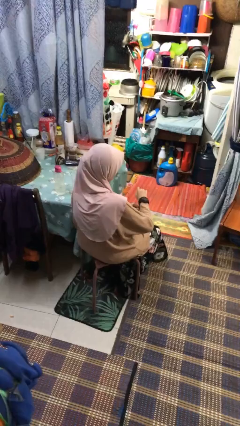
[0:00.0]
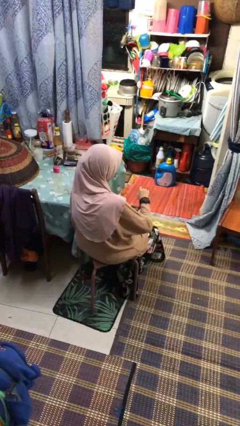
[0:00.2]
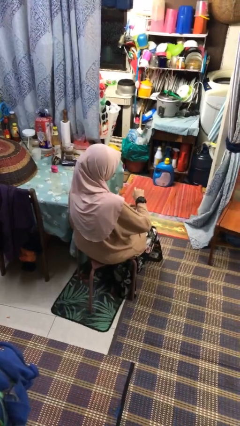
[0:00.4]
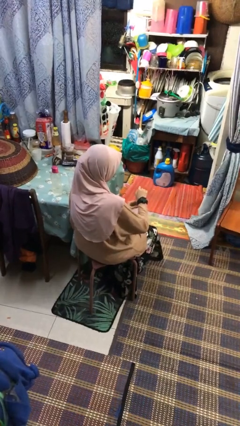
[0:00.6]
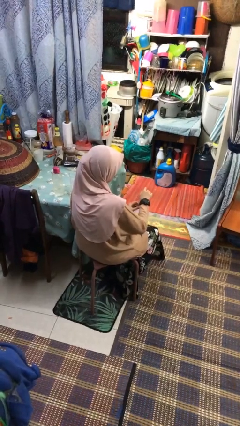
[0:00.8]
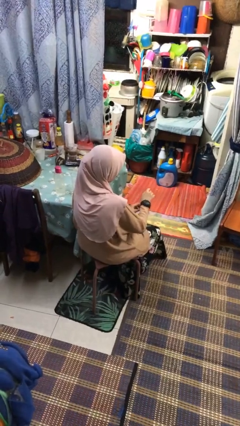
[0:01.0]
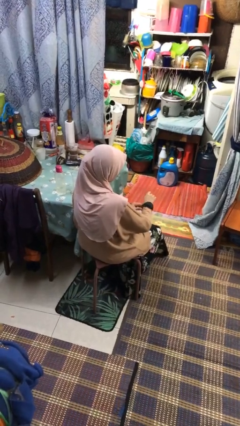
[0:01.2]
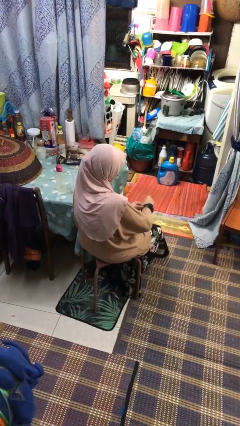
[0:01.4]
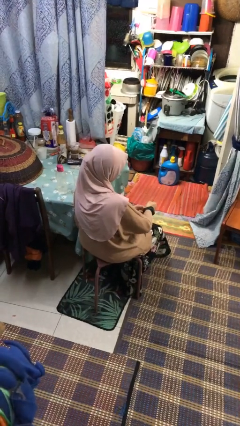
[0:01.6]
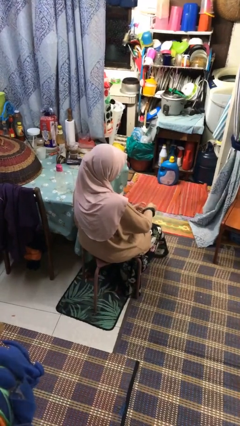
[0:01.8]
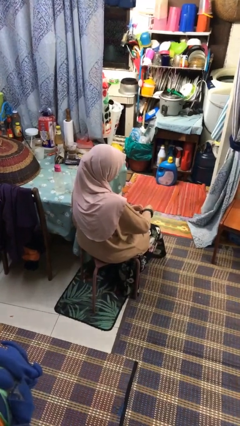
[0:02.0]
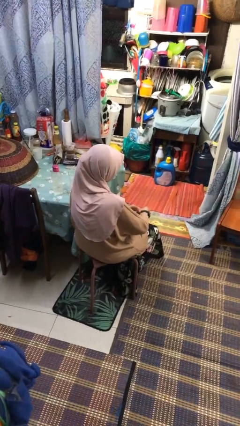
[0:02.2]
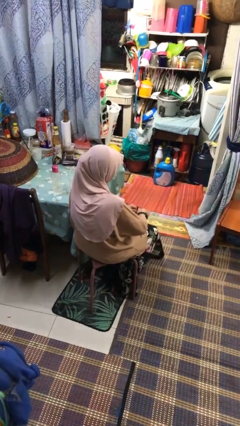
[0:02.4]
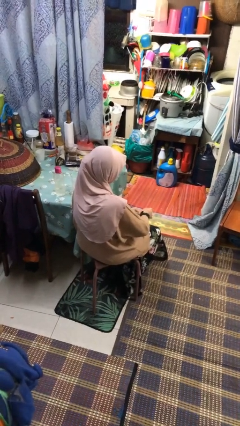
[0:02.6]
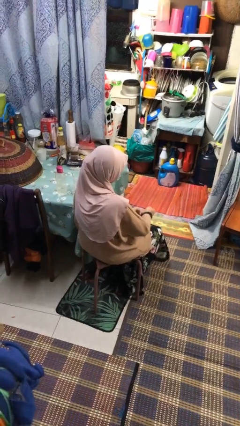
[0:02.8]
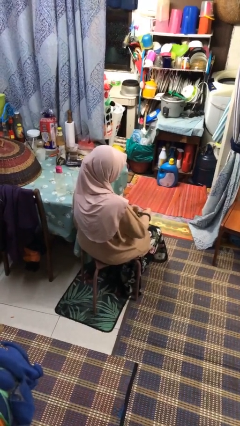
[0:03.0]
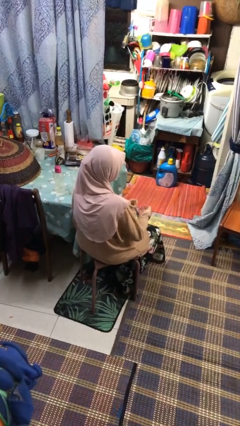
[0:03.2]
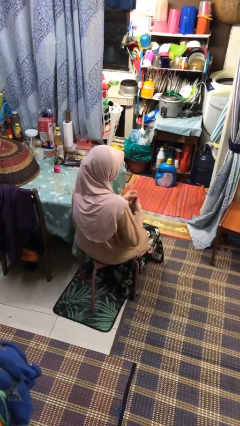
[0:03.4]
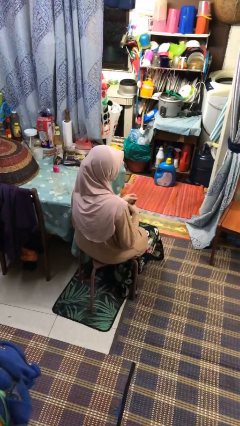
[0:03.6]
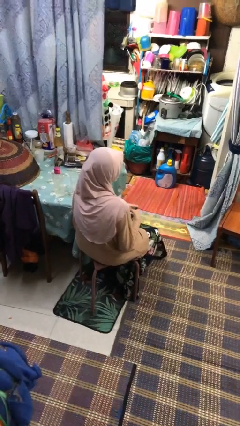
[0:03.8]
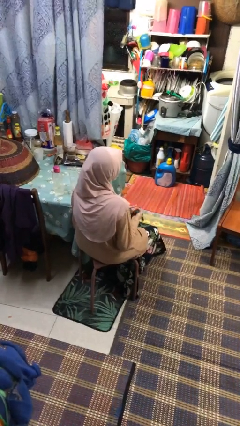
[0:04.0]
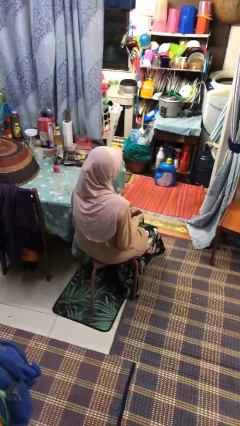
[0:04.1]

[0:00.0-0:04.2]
person takes off wristwatch

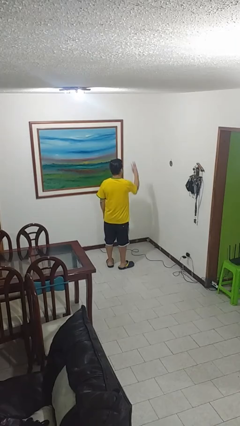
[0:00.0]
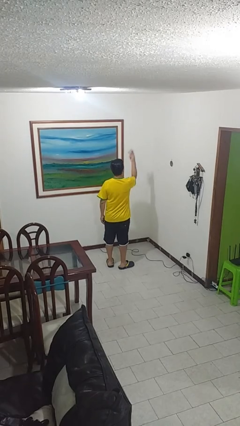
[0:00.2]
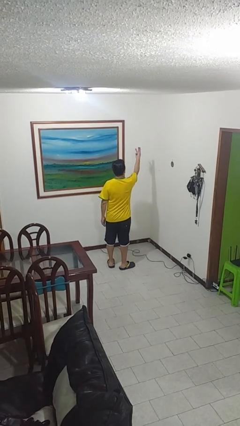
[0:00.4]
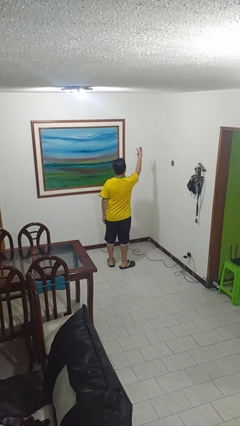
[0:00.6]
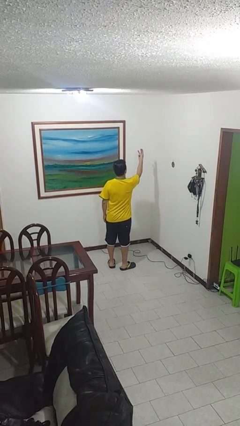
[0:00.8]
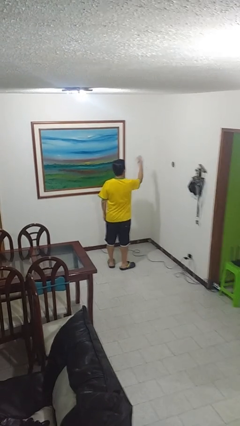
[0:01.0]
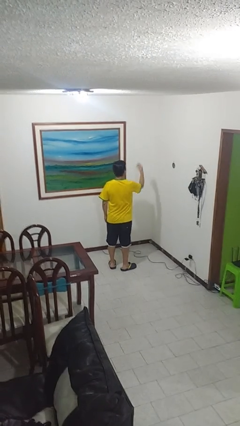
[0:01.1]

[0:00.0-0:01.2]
person gestures number three

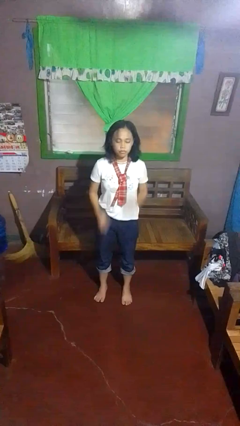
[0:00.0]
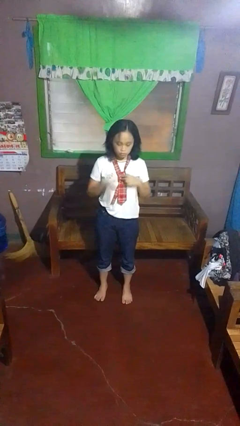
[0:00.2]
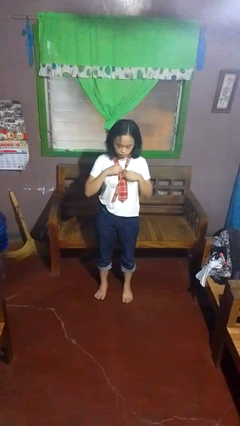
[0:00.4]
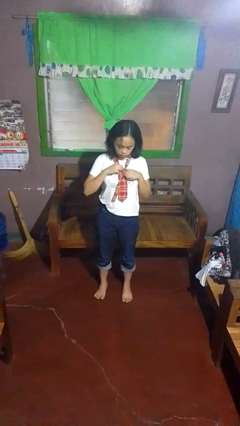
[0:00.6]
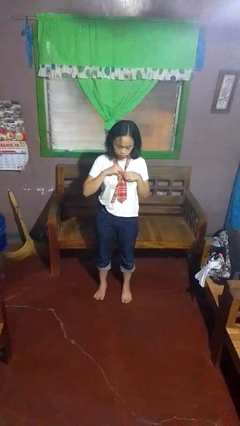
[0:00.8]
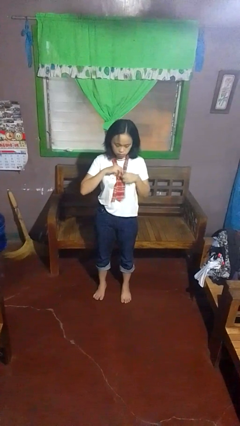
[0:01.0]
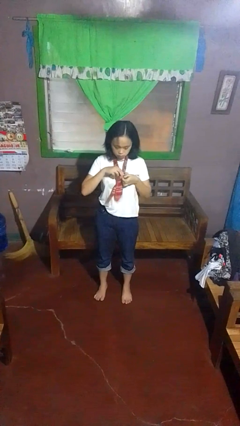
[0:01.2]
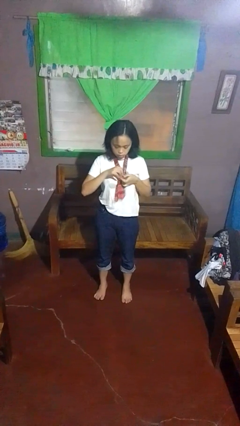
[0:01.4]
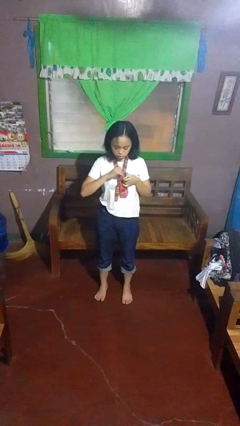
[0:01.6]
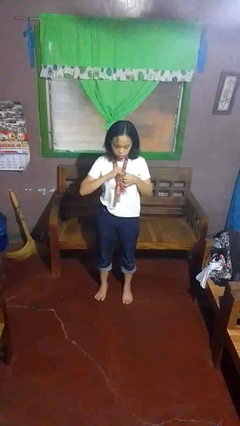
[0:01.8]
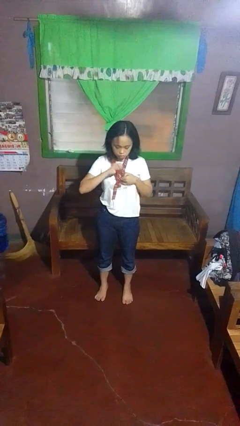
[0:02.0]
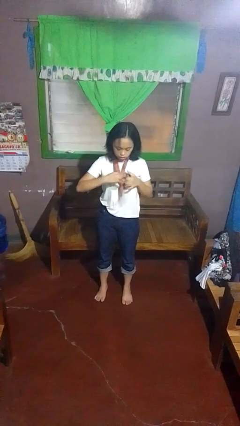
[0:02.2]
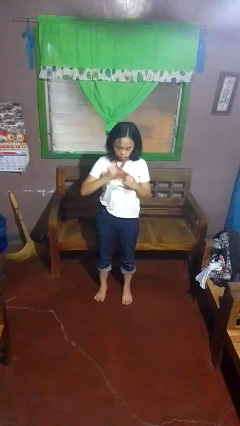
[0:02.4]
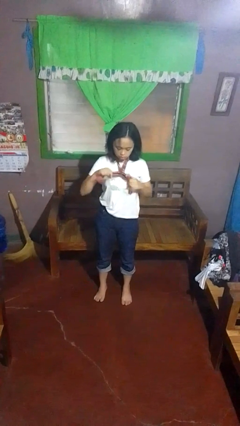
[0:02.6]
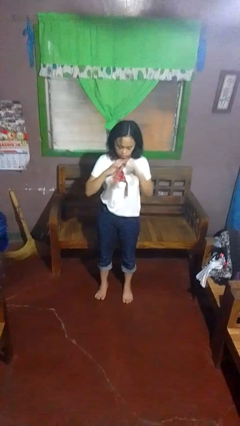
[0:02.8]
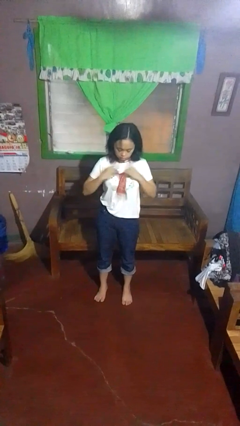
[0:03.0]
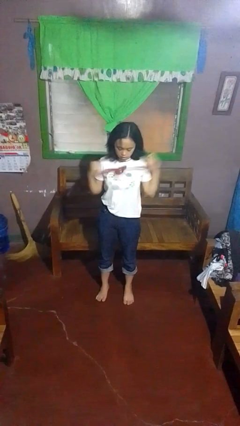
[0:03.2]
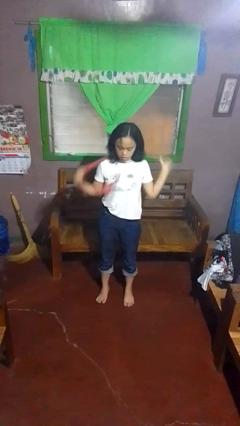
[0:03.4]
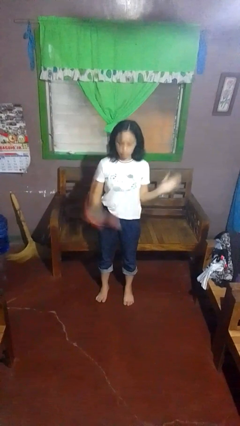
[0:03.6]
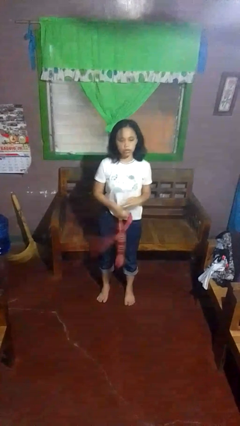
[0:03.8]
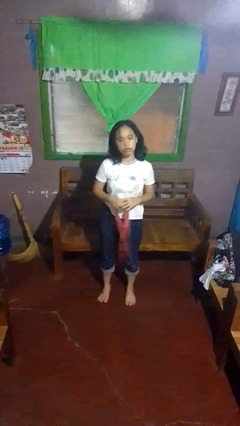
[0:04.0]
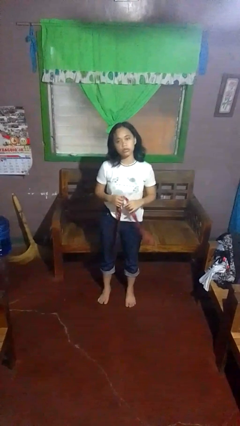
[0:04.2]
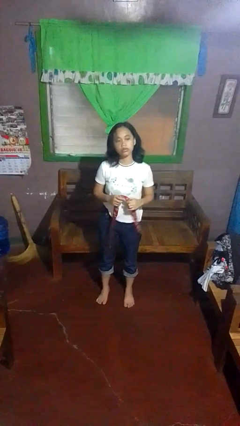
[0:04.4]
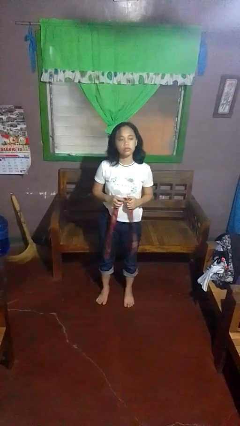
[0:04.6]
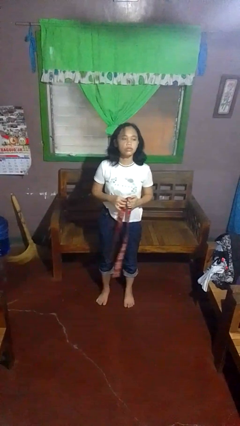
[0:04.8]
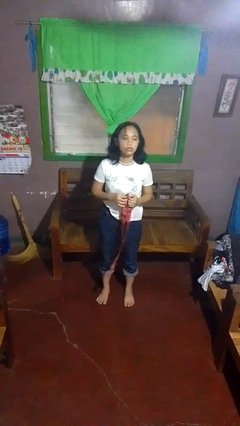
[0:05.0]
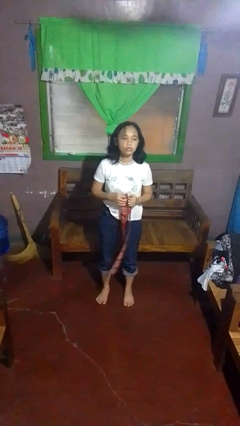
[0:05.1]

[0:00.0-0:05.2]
person takes off necktie

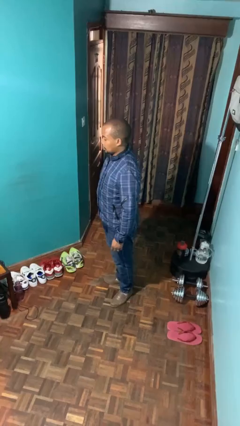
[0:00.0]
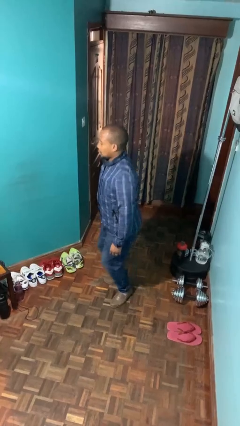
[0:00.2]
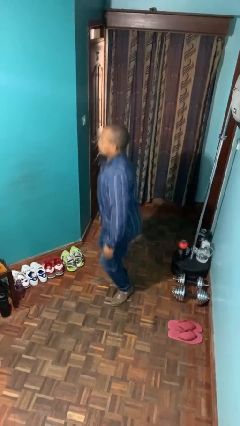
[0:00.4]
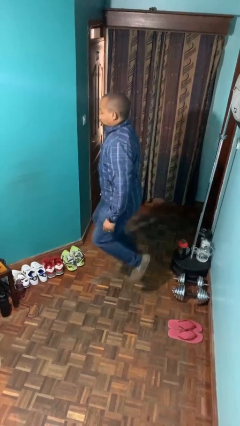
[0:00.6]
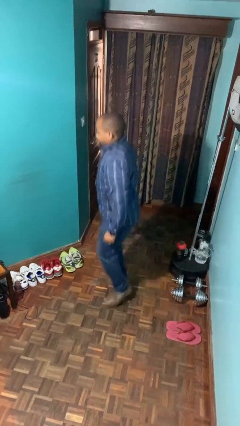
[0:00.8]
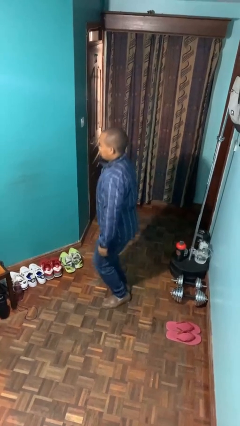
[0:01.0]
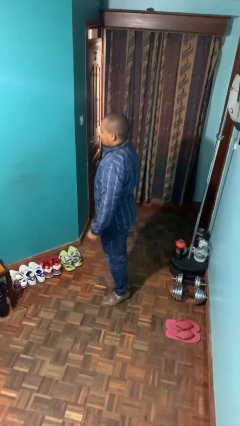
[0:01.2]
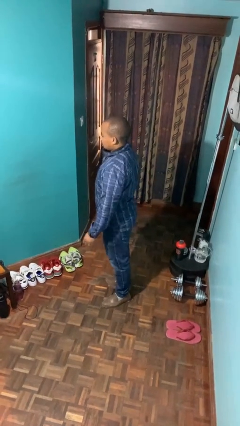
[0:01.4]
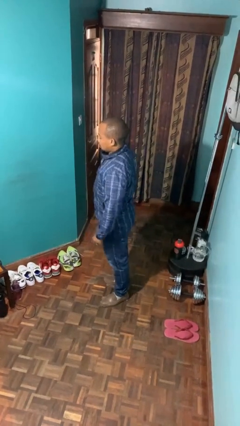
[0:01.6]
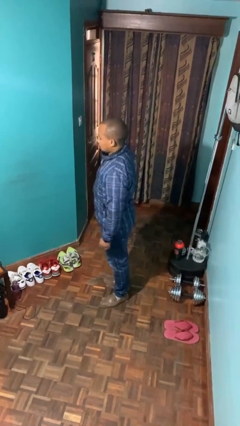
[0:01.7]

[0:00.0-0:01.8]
person jumps

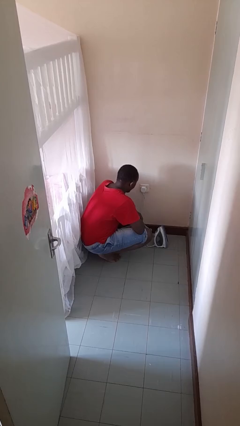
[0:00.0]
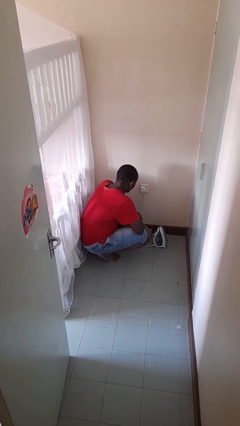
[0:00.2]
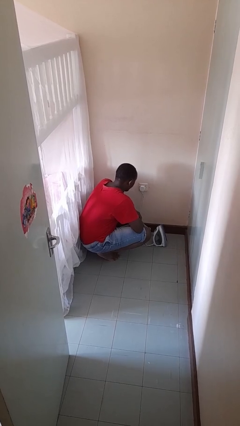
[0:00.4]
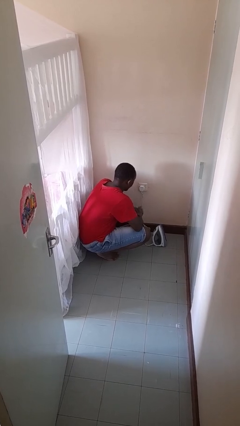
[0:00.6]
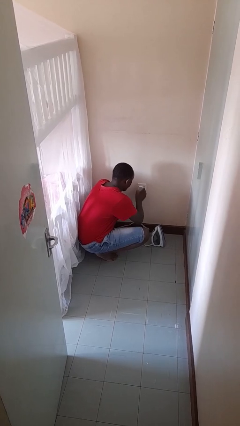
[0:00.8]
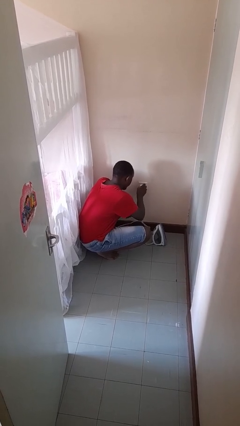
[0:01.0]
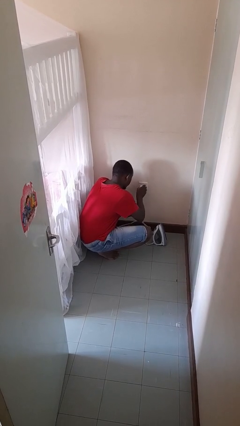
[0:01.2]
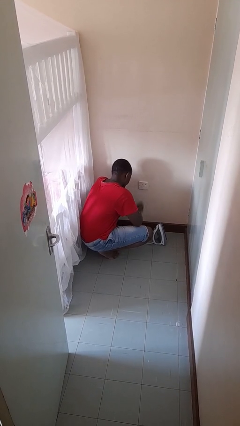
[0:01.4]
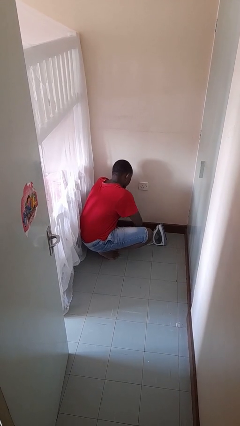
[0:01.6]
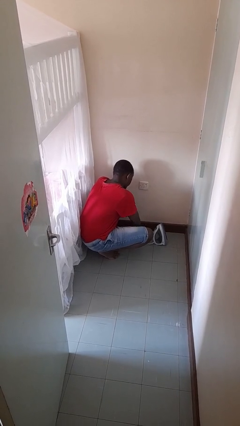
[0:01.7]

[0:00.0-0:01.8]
person unplugs from electrical socket

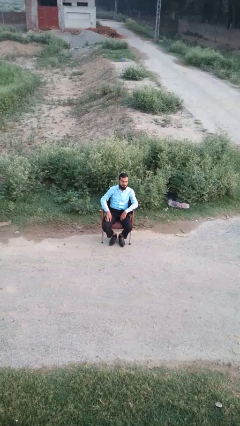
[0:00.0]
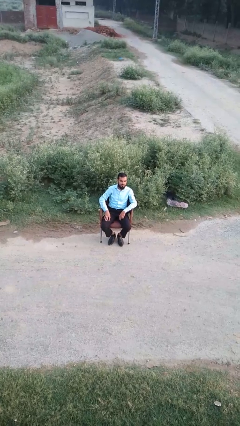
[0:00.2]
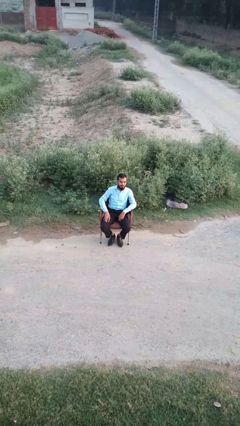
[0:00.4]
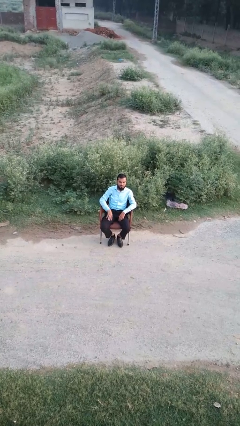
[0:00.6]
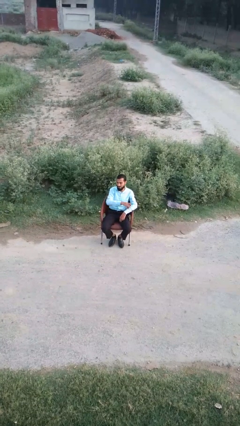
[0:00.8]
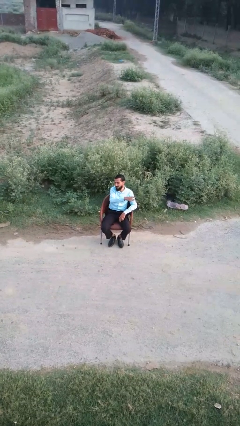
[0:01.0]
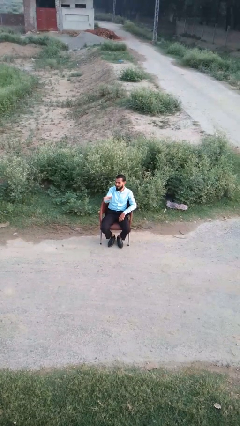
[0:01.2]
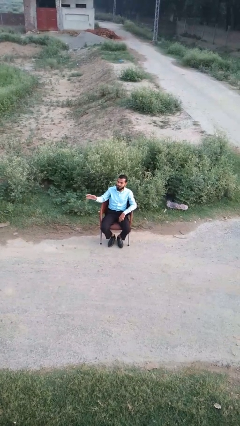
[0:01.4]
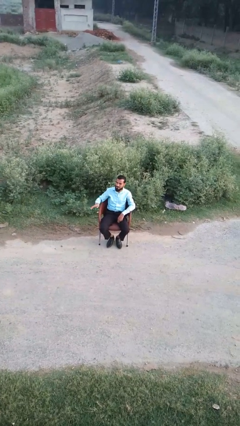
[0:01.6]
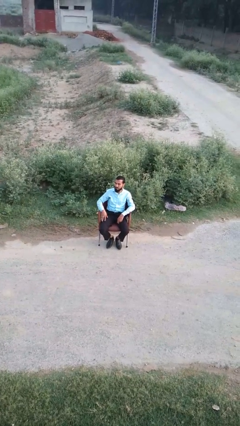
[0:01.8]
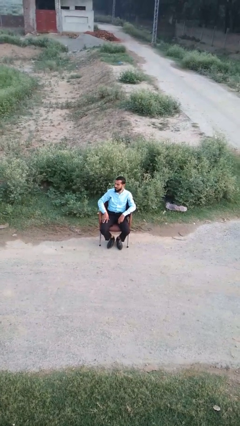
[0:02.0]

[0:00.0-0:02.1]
person gestures swipe right

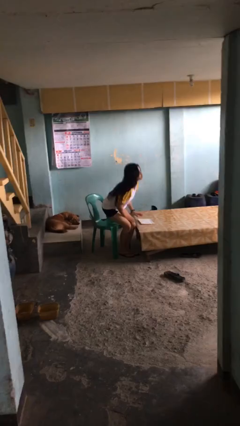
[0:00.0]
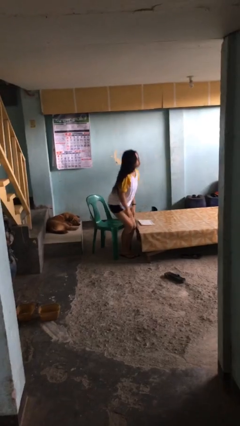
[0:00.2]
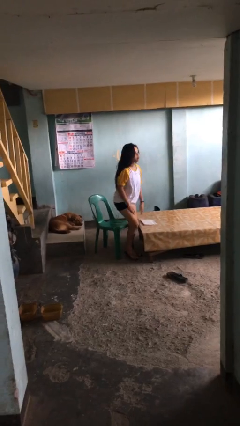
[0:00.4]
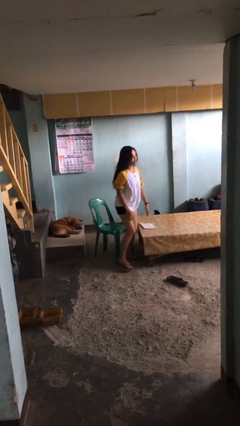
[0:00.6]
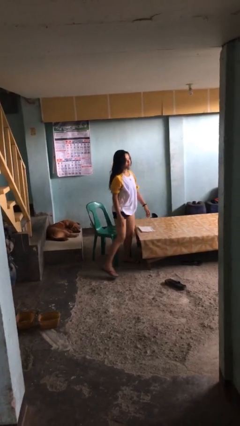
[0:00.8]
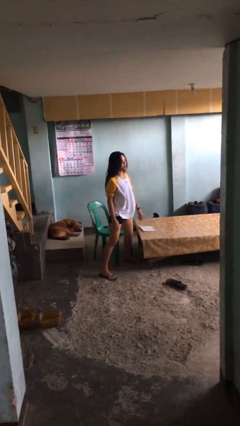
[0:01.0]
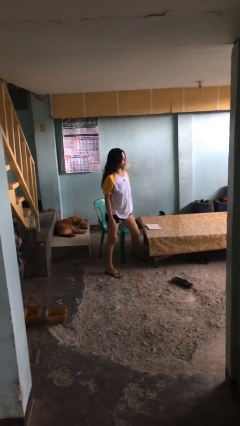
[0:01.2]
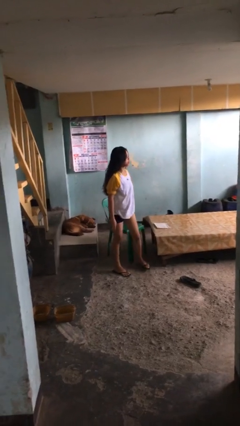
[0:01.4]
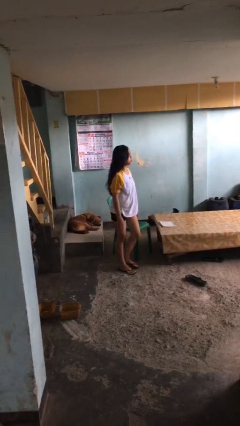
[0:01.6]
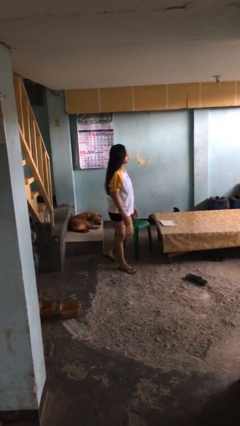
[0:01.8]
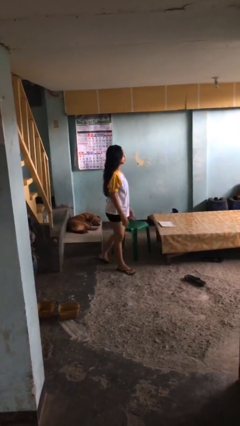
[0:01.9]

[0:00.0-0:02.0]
person stands up
